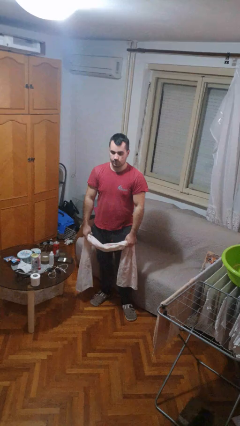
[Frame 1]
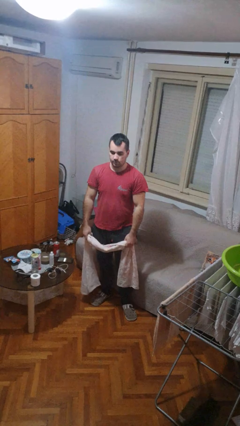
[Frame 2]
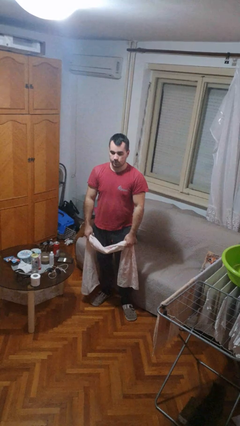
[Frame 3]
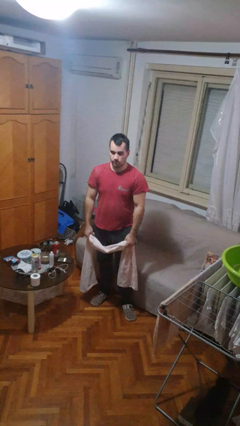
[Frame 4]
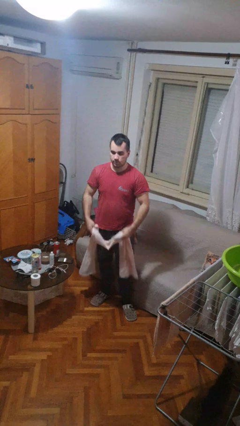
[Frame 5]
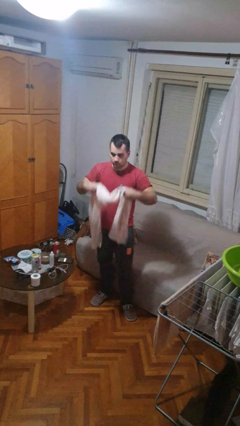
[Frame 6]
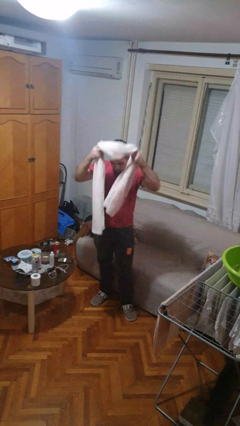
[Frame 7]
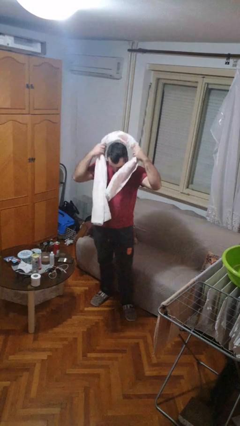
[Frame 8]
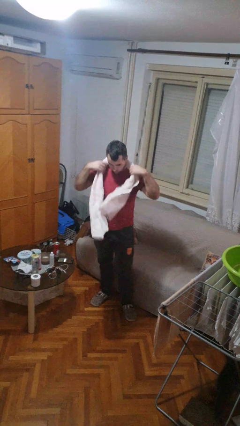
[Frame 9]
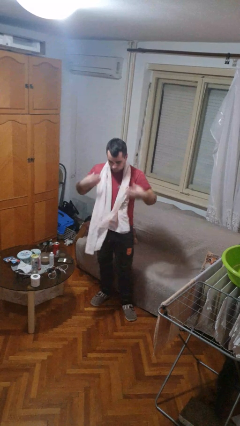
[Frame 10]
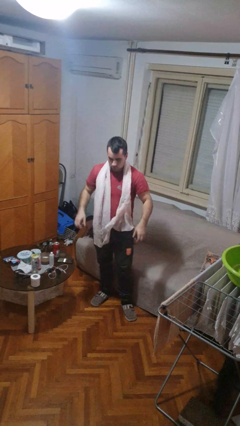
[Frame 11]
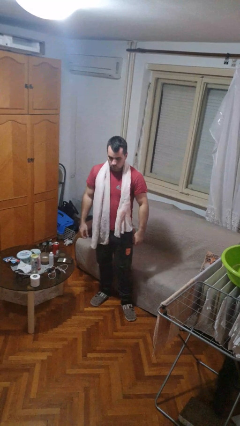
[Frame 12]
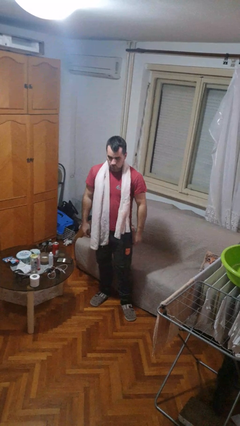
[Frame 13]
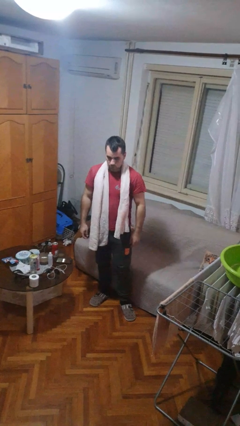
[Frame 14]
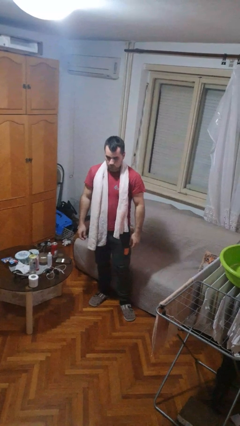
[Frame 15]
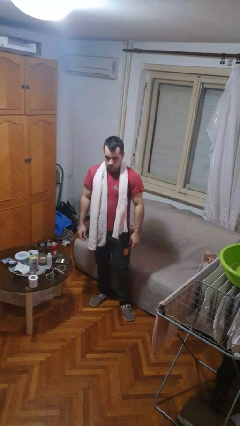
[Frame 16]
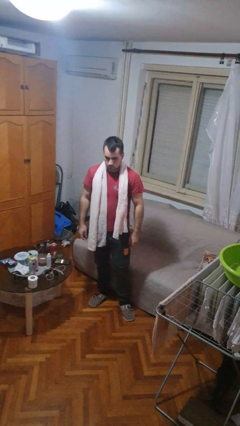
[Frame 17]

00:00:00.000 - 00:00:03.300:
person puts on scarf

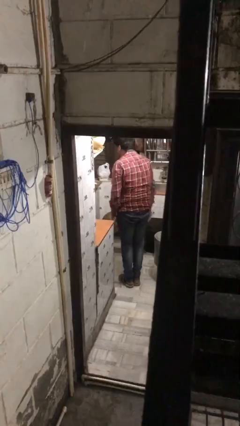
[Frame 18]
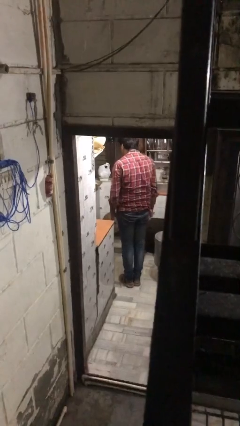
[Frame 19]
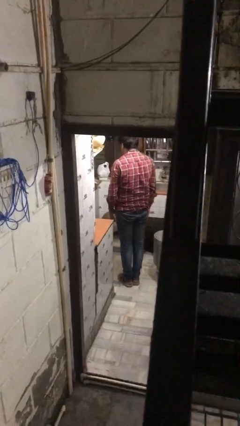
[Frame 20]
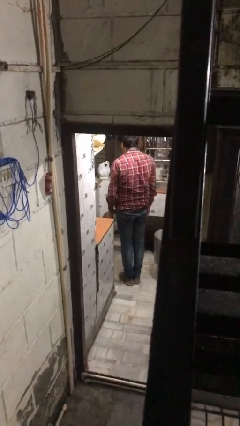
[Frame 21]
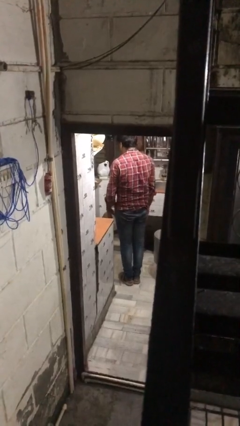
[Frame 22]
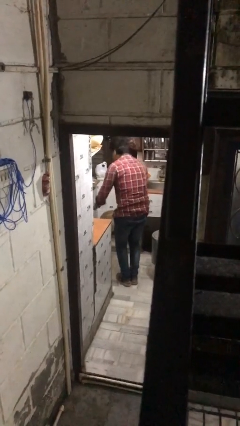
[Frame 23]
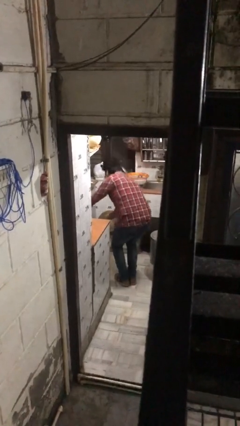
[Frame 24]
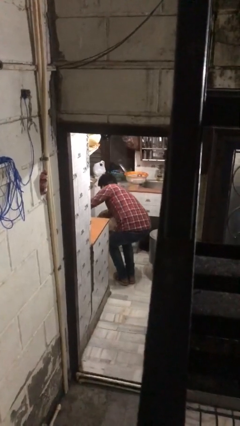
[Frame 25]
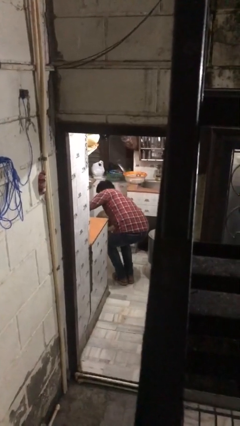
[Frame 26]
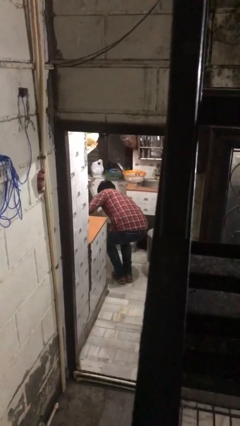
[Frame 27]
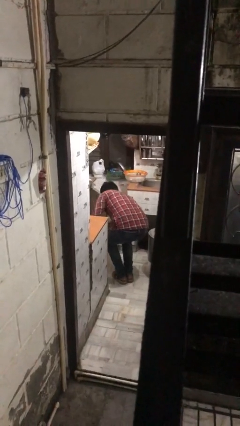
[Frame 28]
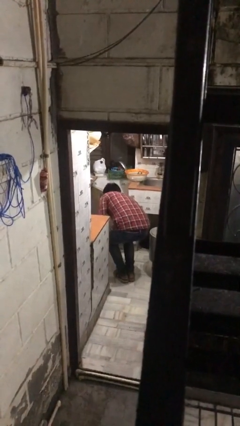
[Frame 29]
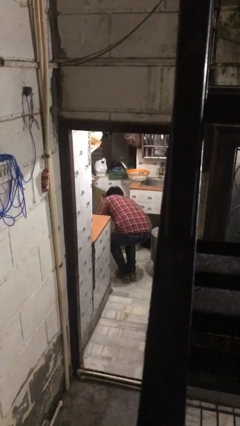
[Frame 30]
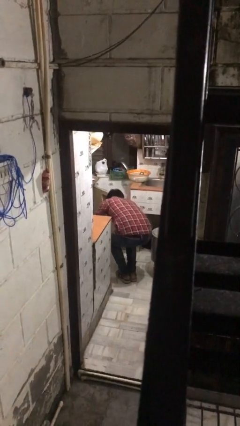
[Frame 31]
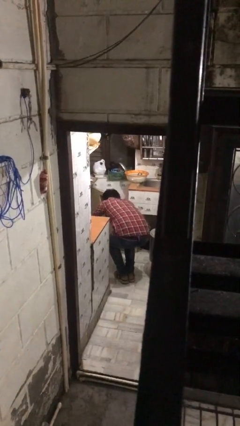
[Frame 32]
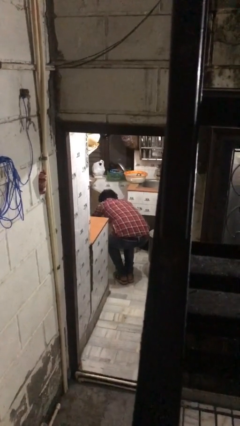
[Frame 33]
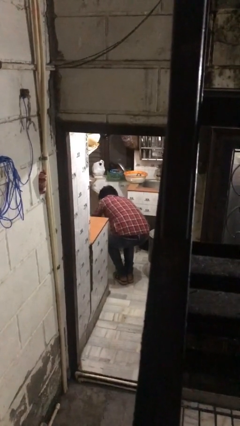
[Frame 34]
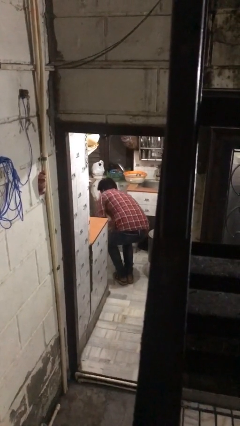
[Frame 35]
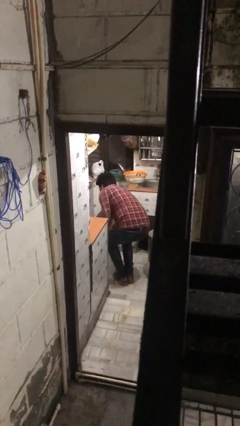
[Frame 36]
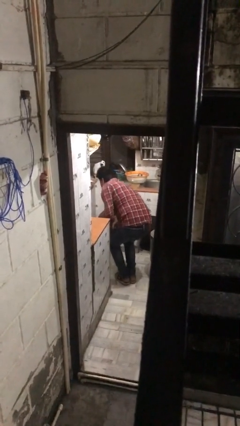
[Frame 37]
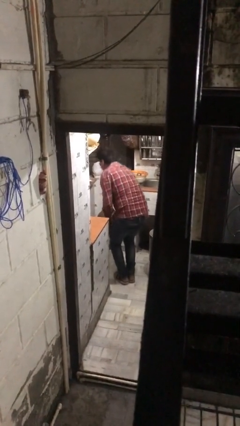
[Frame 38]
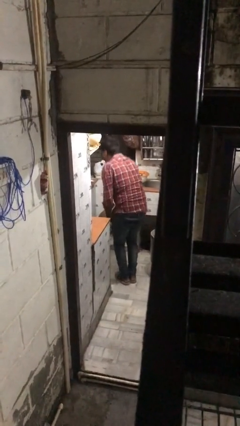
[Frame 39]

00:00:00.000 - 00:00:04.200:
person searches in kitchen drawer

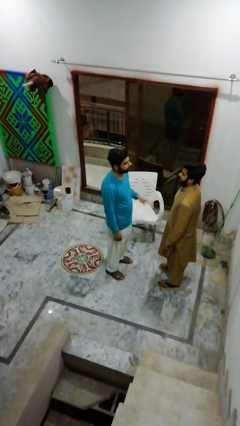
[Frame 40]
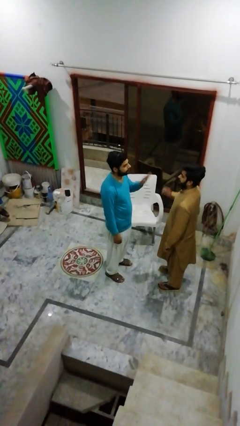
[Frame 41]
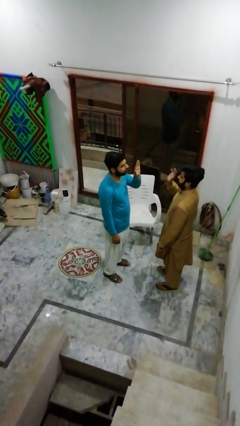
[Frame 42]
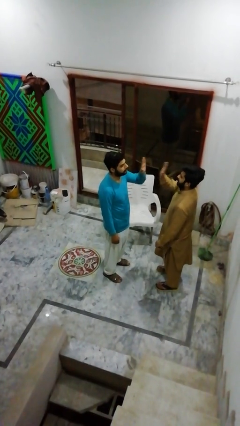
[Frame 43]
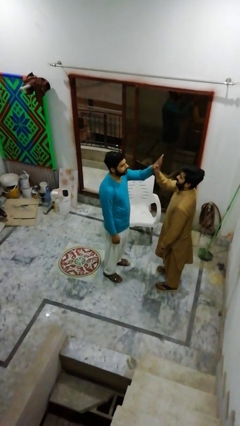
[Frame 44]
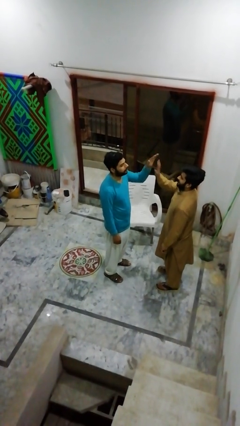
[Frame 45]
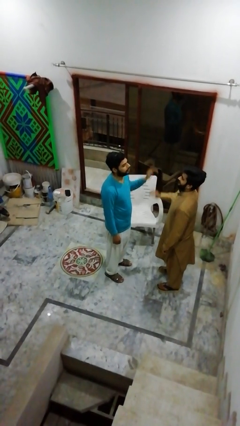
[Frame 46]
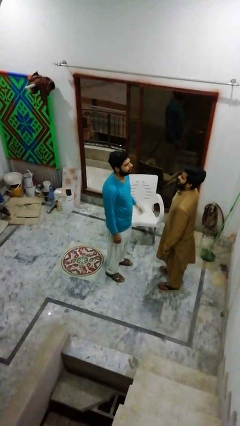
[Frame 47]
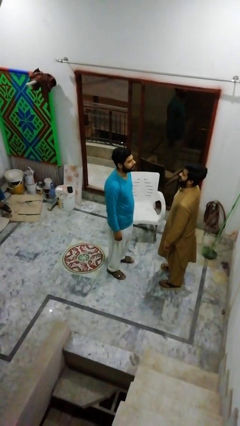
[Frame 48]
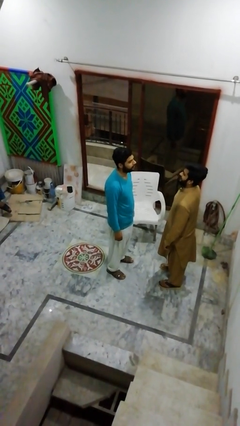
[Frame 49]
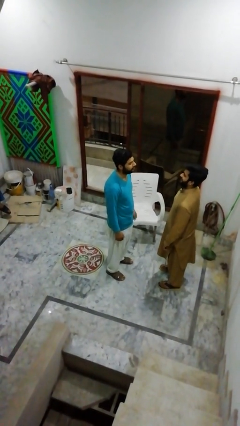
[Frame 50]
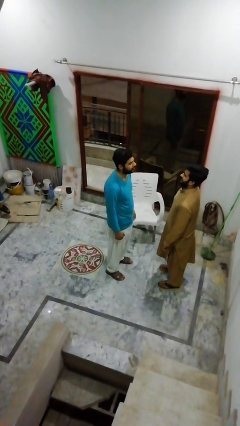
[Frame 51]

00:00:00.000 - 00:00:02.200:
person highfives hand

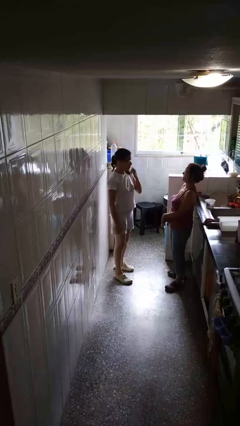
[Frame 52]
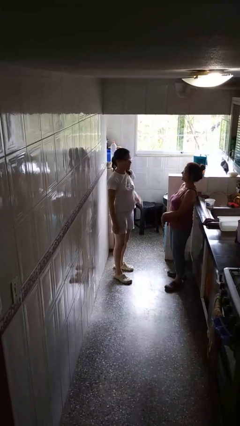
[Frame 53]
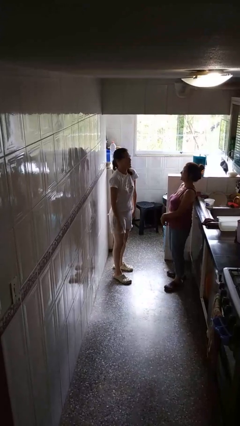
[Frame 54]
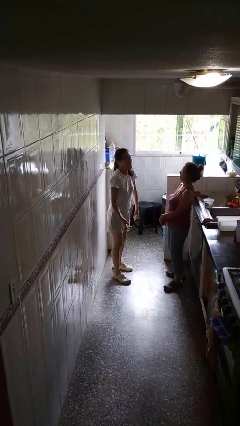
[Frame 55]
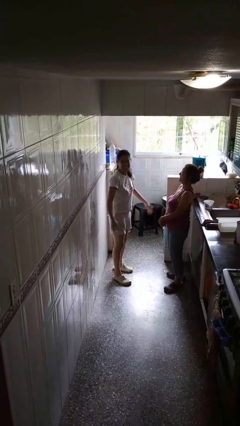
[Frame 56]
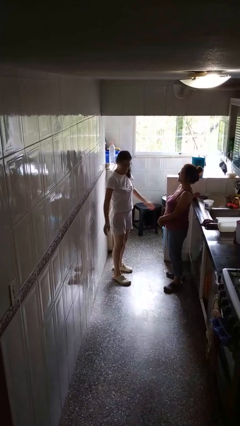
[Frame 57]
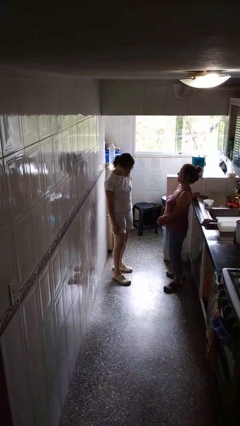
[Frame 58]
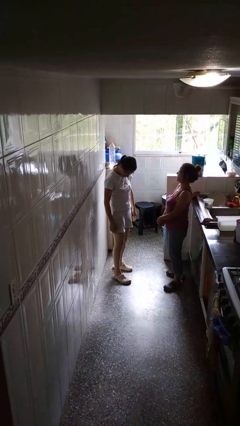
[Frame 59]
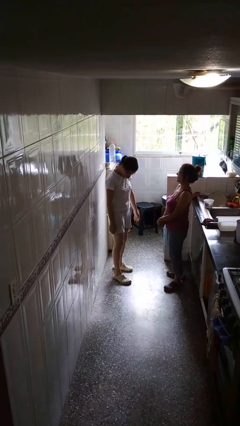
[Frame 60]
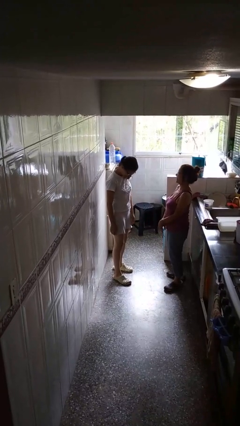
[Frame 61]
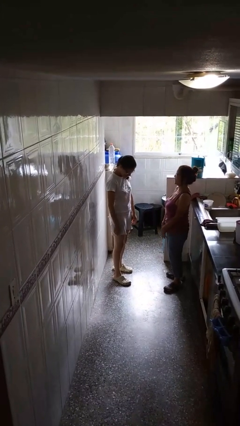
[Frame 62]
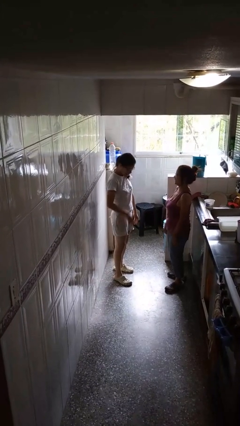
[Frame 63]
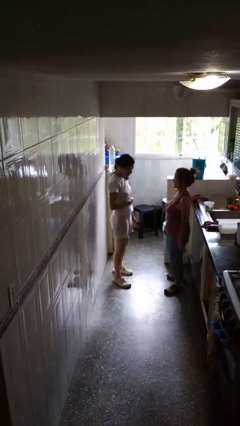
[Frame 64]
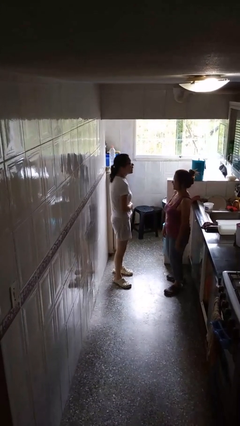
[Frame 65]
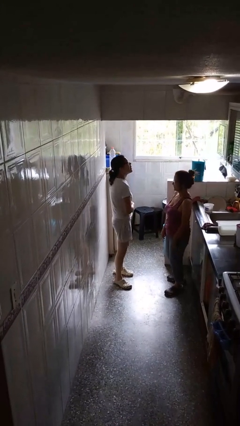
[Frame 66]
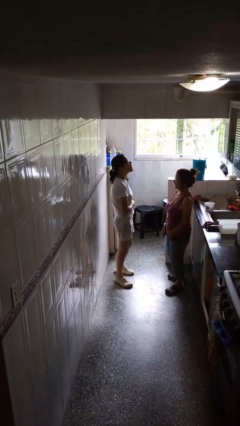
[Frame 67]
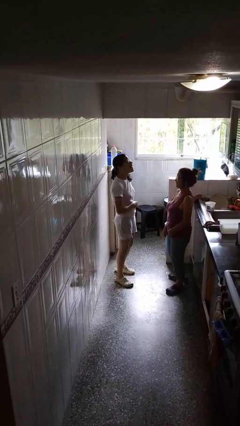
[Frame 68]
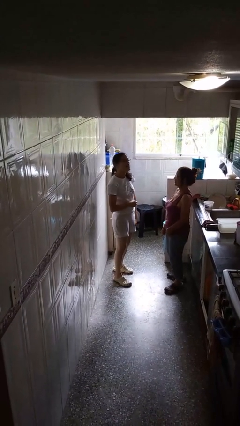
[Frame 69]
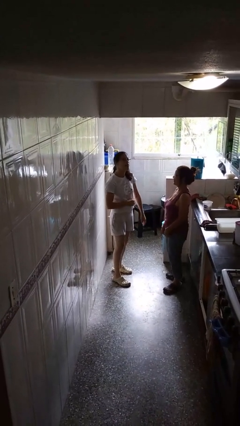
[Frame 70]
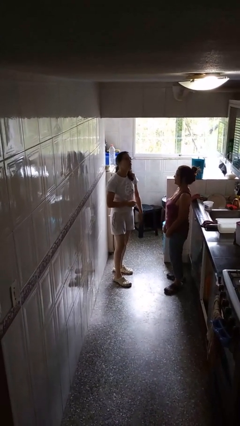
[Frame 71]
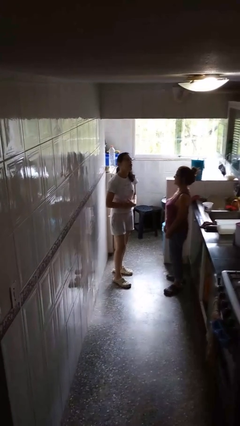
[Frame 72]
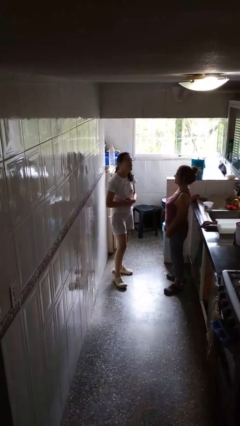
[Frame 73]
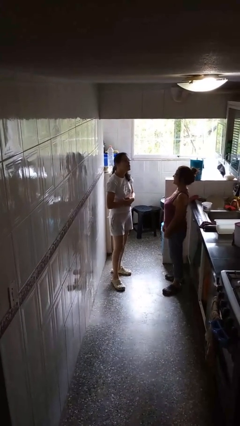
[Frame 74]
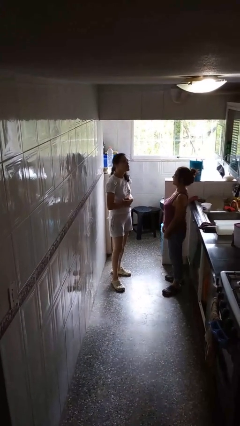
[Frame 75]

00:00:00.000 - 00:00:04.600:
person laughs with person

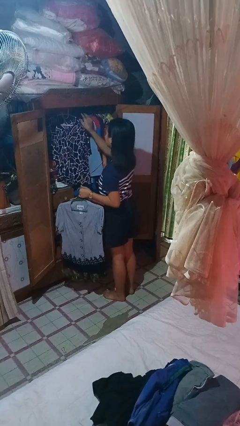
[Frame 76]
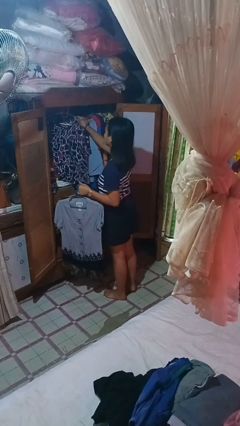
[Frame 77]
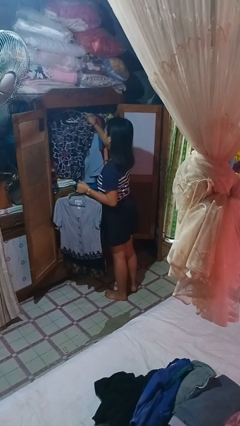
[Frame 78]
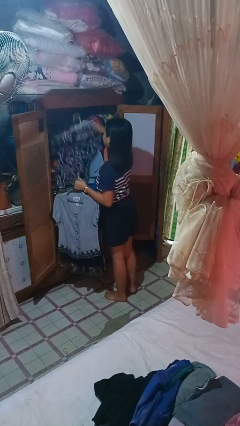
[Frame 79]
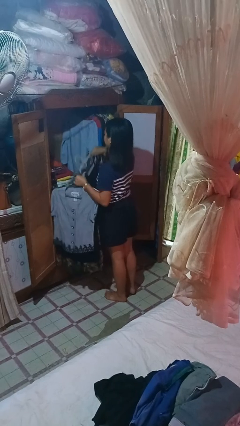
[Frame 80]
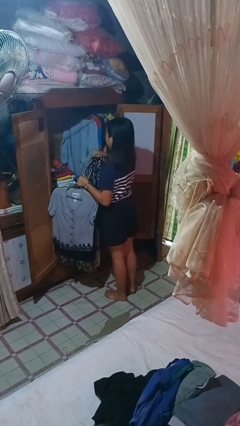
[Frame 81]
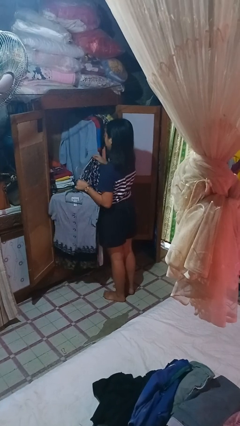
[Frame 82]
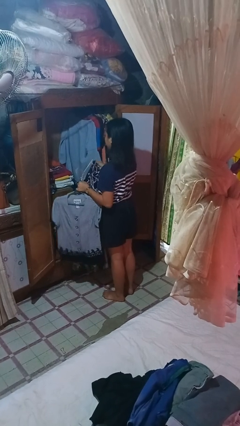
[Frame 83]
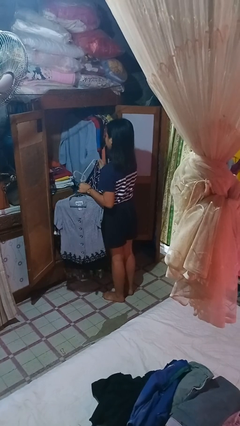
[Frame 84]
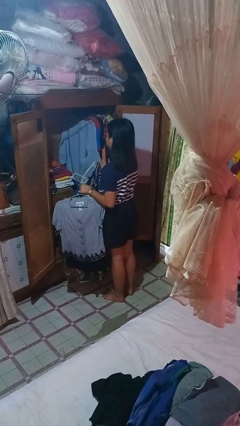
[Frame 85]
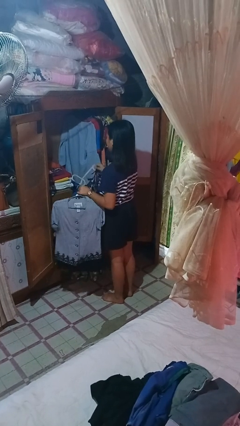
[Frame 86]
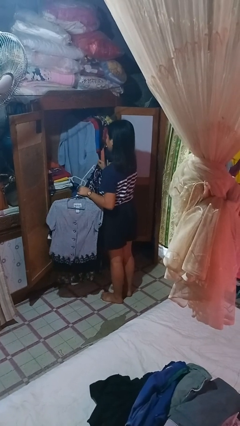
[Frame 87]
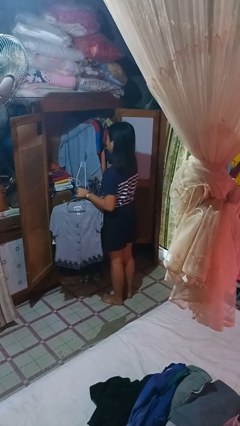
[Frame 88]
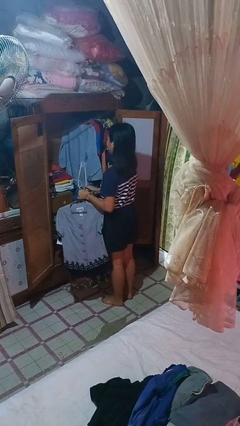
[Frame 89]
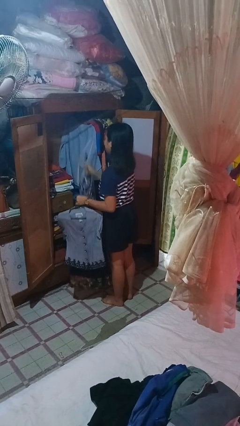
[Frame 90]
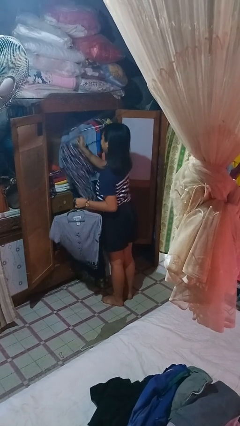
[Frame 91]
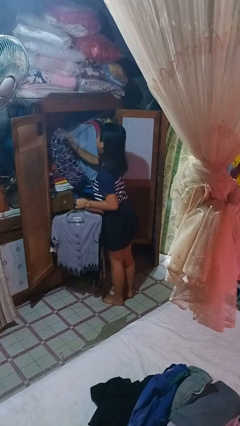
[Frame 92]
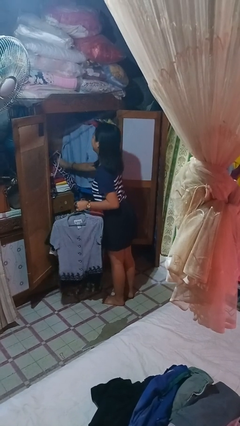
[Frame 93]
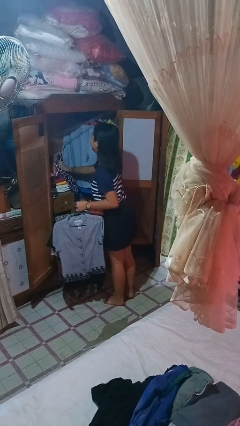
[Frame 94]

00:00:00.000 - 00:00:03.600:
person takes clothes from closet
